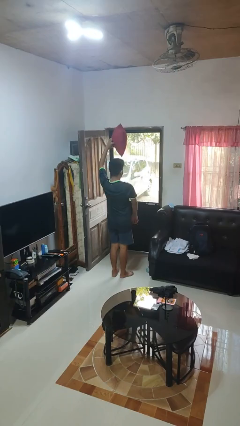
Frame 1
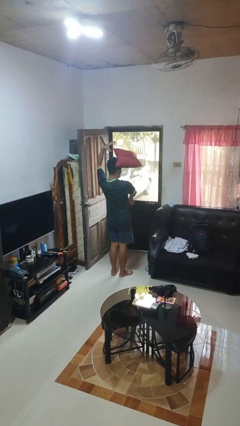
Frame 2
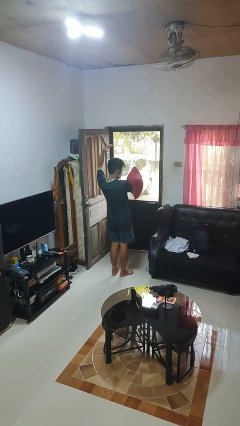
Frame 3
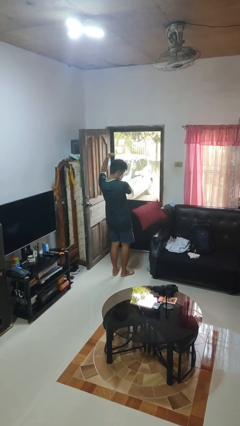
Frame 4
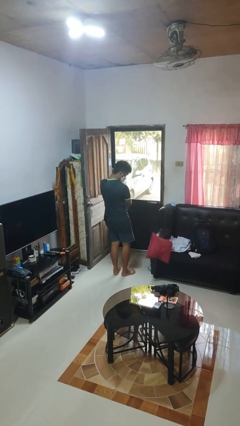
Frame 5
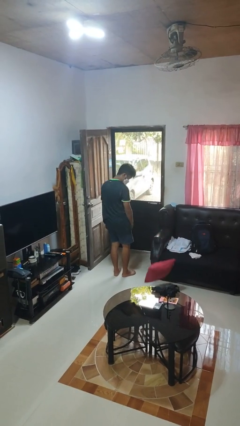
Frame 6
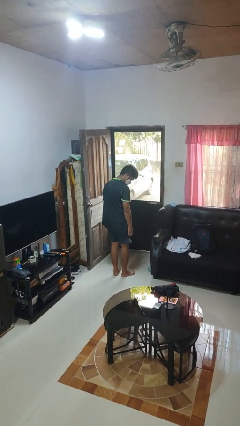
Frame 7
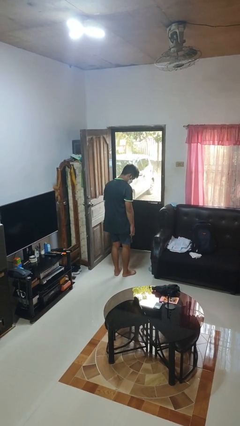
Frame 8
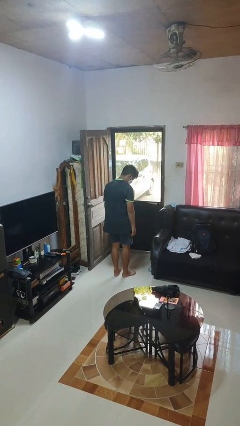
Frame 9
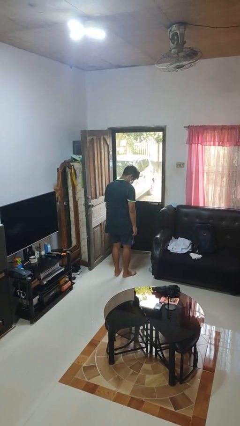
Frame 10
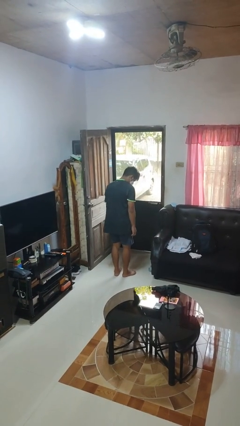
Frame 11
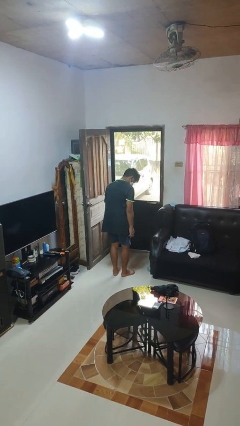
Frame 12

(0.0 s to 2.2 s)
person drops object

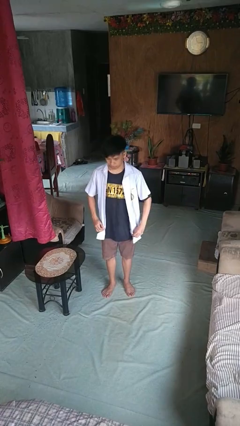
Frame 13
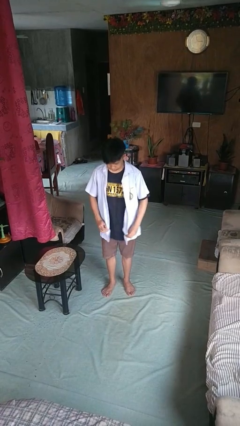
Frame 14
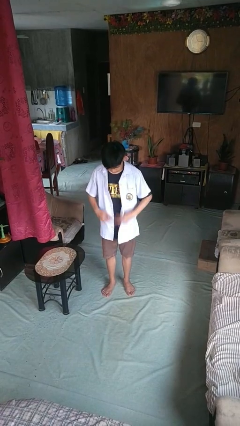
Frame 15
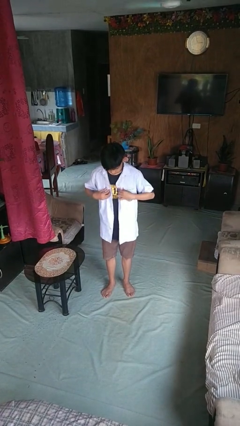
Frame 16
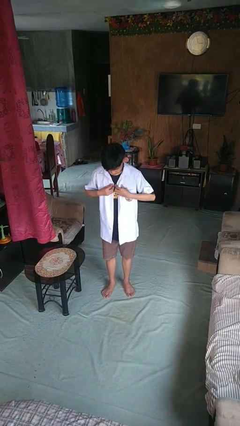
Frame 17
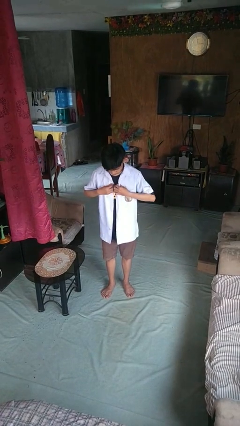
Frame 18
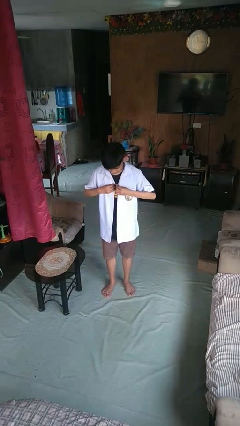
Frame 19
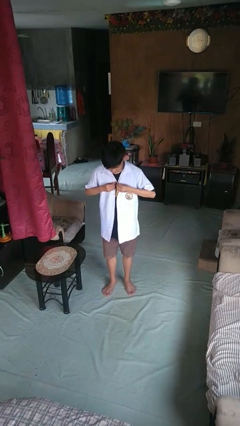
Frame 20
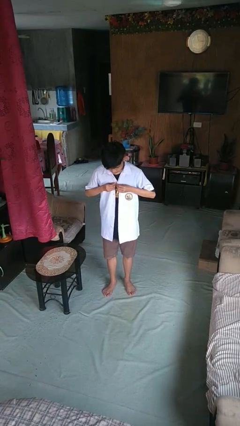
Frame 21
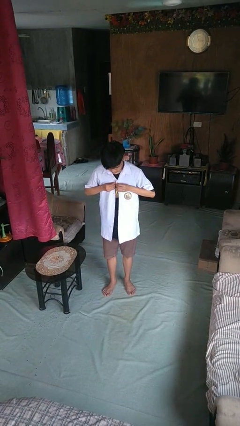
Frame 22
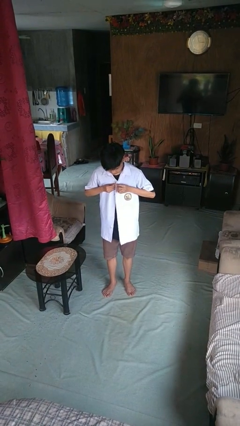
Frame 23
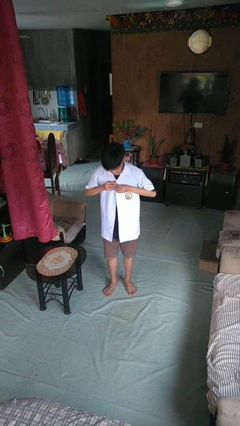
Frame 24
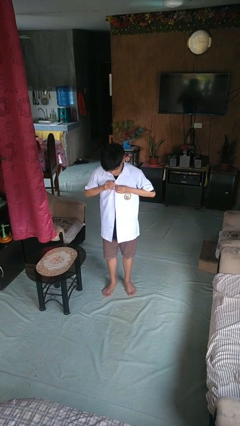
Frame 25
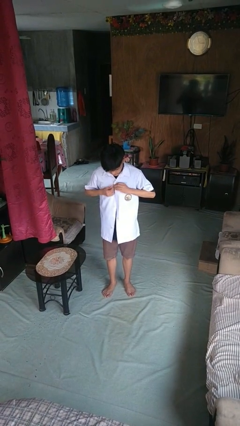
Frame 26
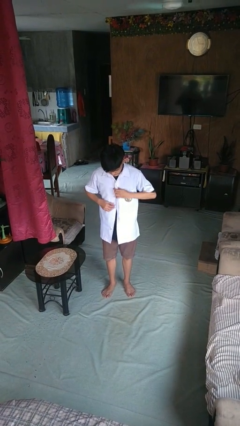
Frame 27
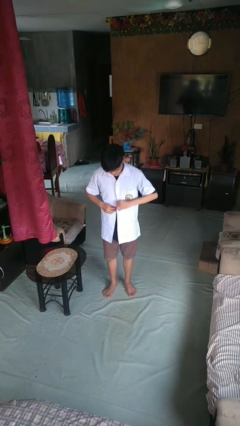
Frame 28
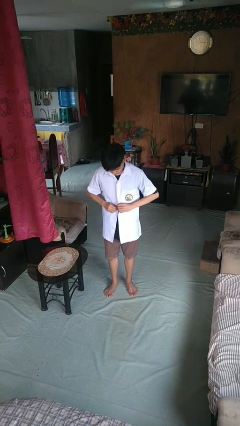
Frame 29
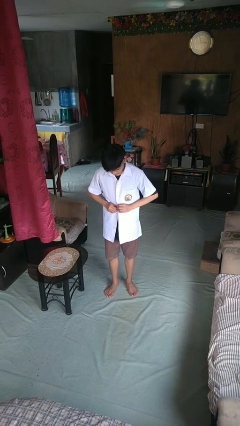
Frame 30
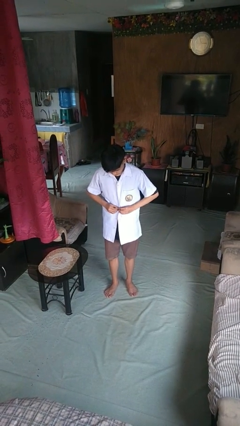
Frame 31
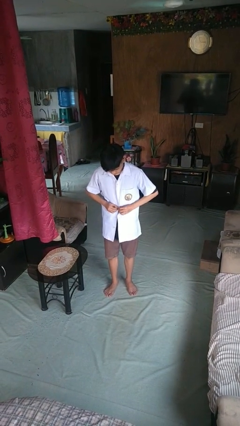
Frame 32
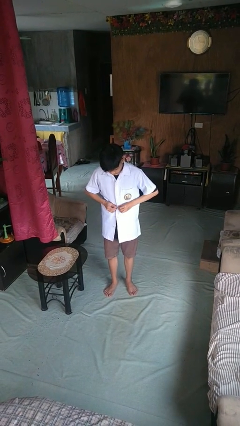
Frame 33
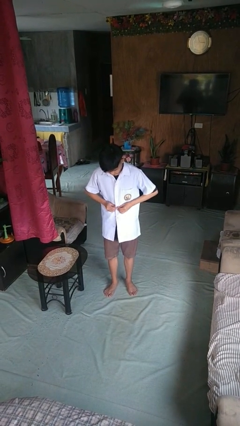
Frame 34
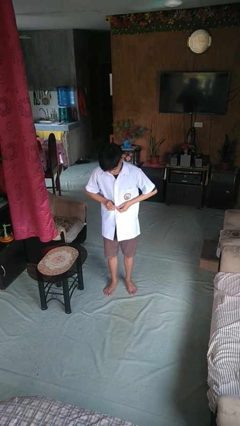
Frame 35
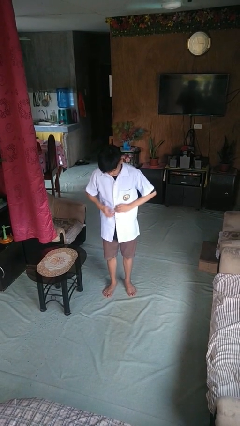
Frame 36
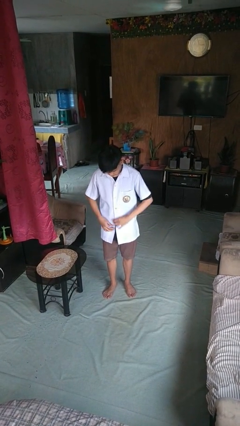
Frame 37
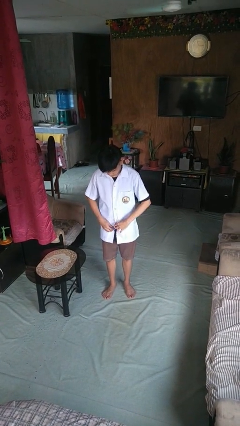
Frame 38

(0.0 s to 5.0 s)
person buttons shirt

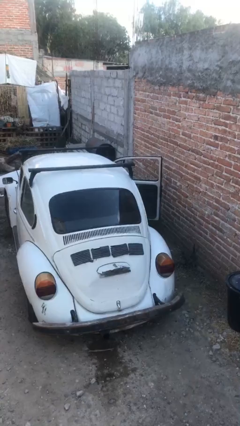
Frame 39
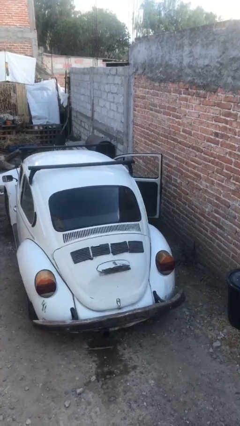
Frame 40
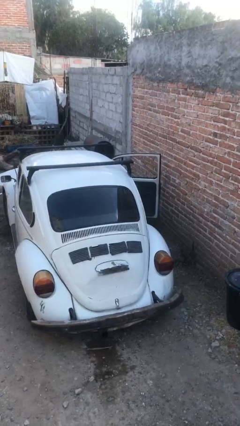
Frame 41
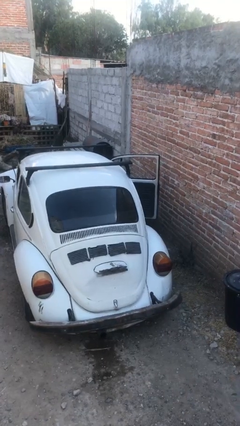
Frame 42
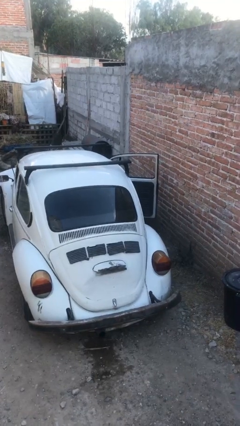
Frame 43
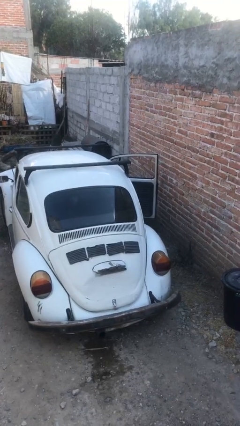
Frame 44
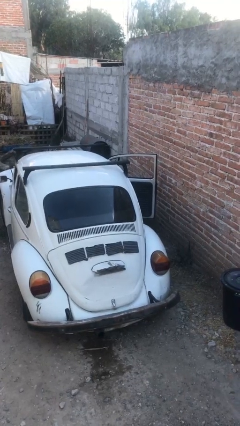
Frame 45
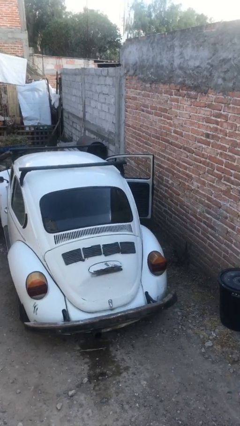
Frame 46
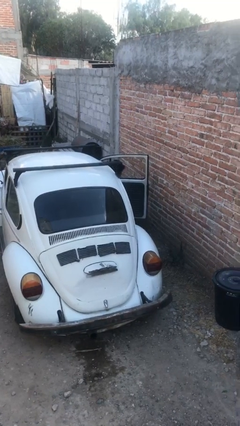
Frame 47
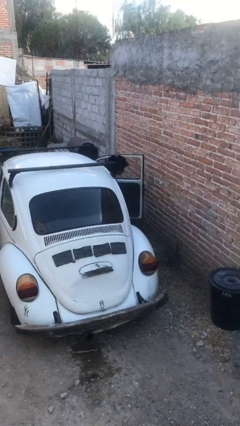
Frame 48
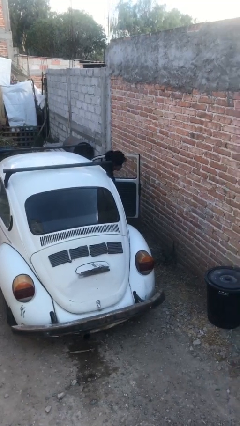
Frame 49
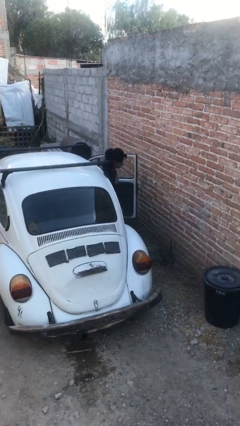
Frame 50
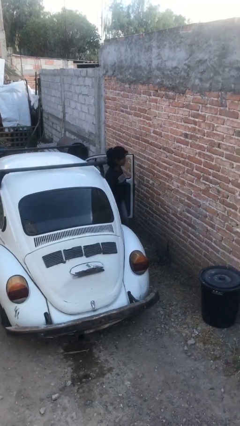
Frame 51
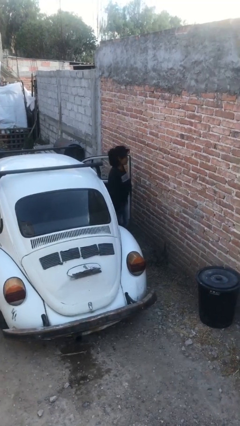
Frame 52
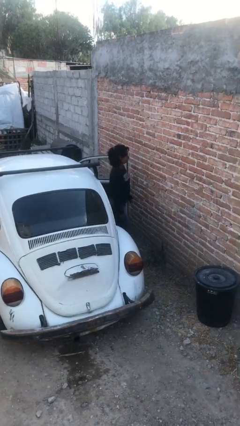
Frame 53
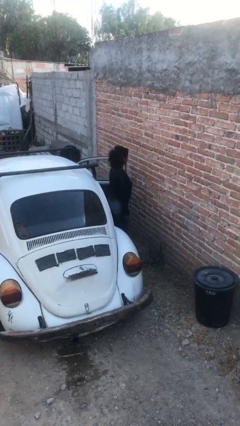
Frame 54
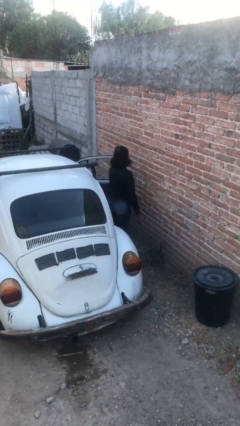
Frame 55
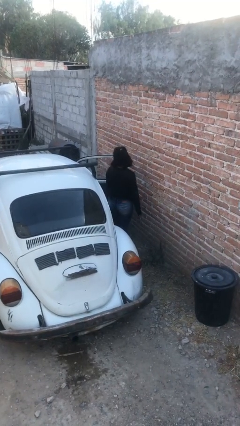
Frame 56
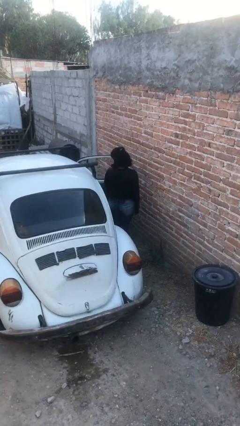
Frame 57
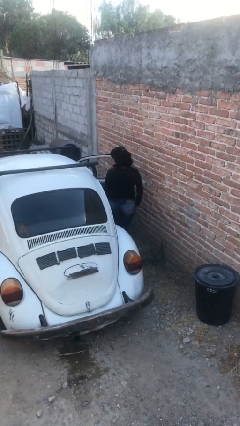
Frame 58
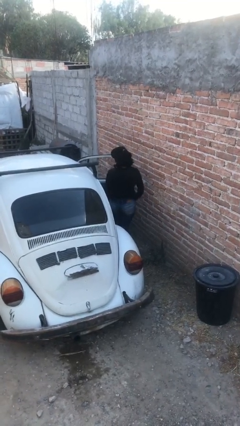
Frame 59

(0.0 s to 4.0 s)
person exits car

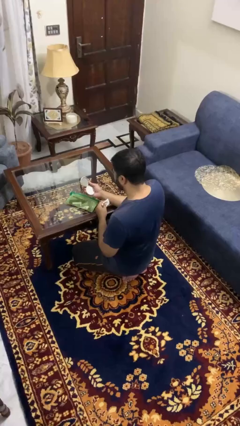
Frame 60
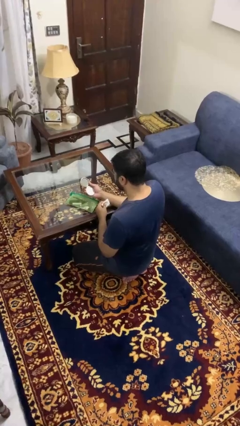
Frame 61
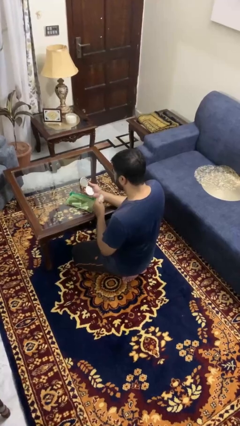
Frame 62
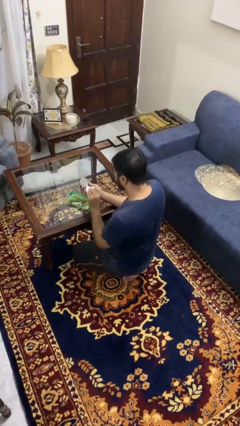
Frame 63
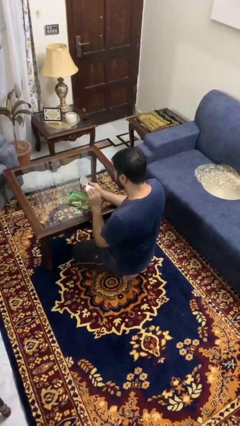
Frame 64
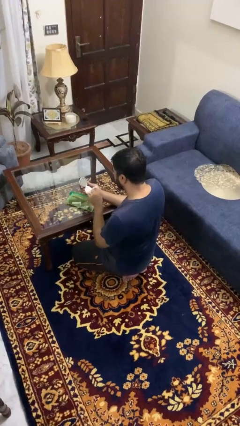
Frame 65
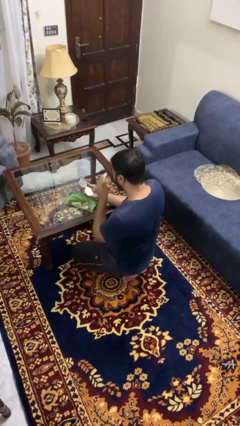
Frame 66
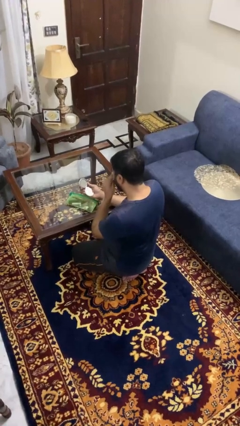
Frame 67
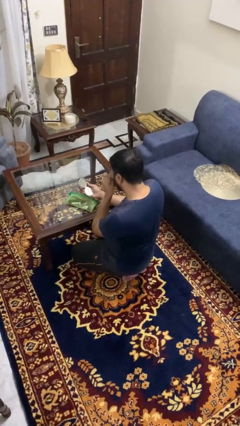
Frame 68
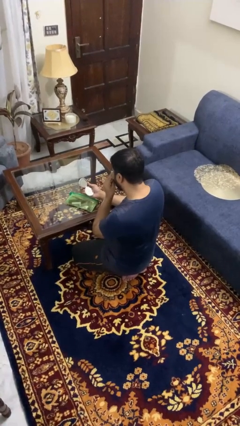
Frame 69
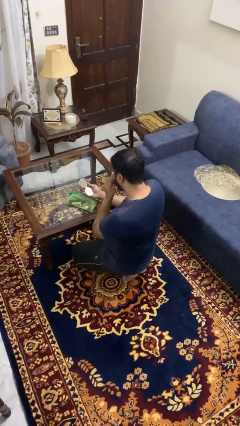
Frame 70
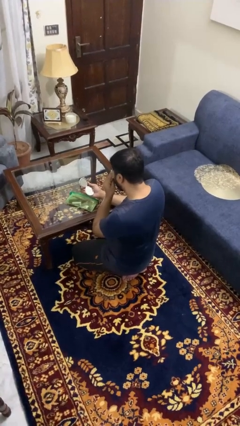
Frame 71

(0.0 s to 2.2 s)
person applies foundation makeup

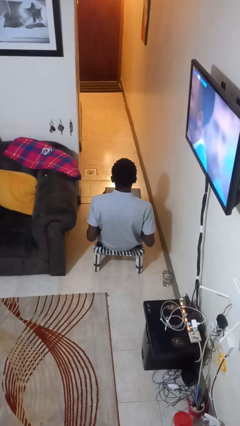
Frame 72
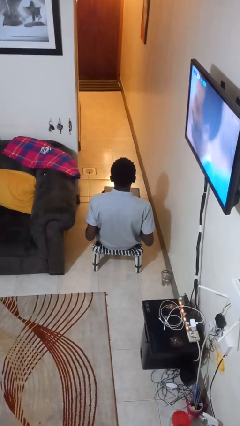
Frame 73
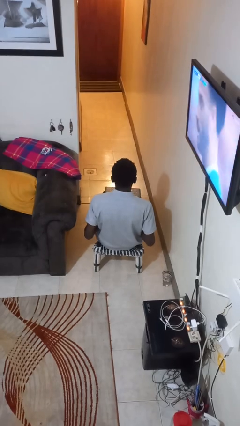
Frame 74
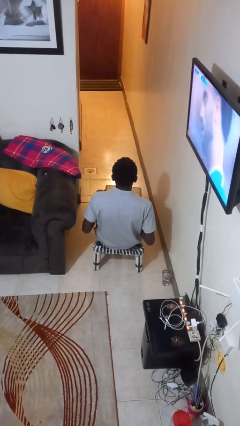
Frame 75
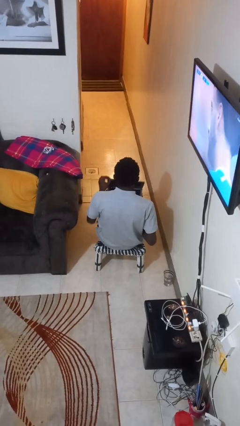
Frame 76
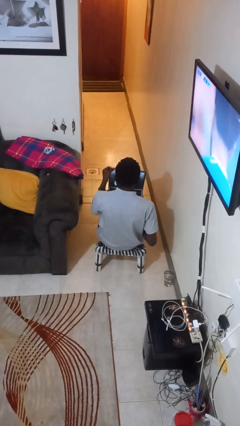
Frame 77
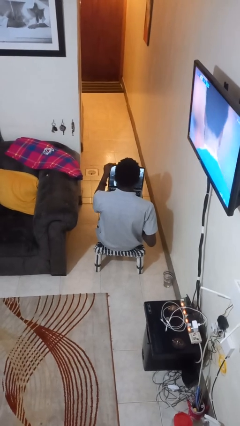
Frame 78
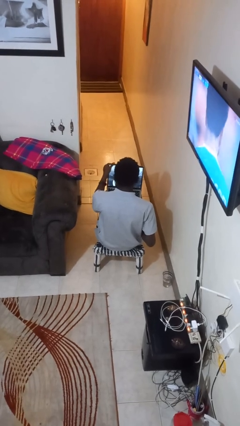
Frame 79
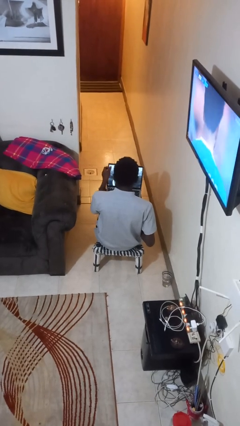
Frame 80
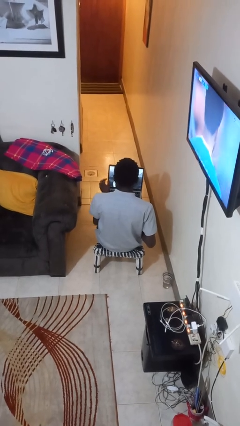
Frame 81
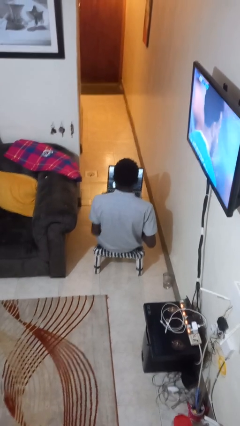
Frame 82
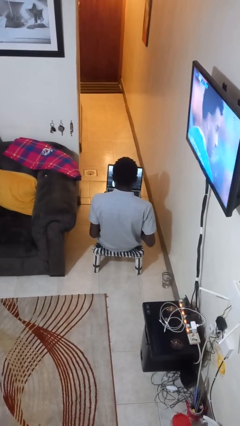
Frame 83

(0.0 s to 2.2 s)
person opens laptop

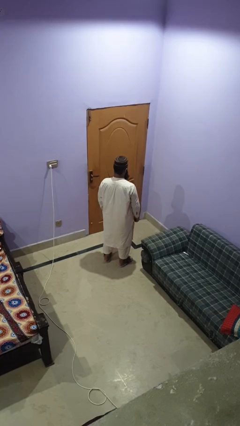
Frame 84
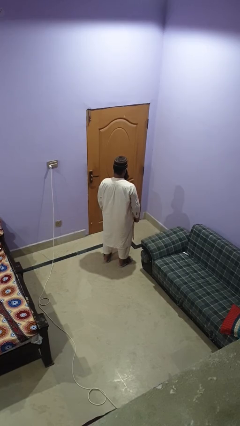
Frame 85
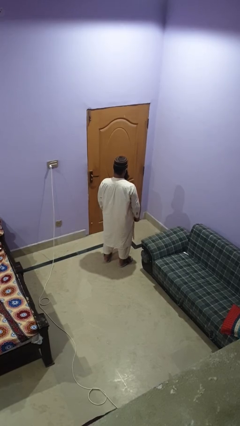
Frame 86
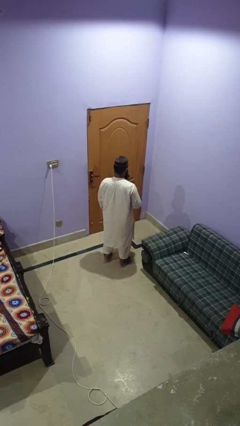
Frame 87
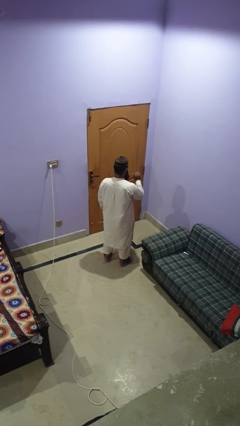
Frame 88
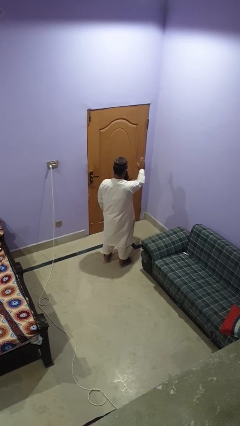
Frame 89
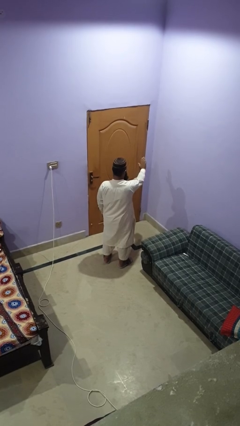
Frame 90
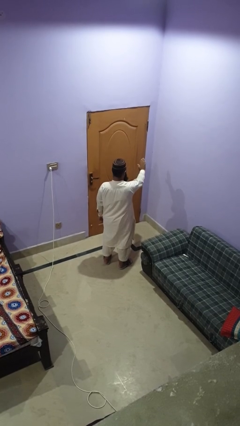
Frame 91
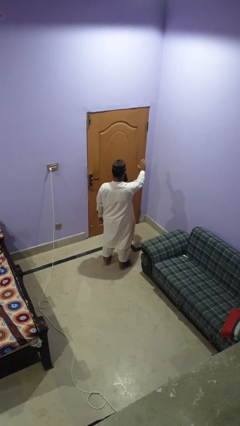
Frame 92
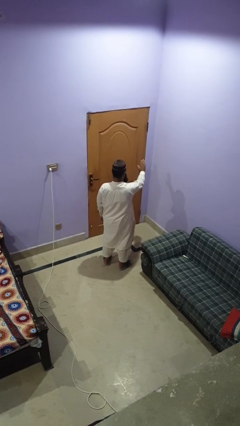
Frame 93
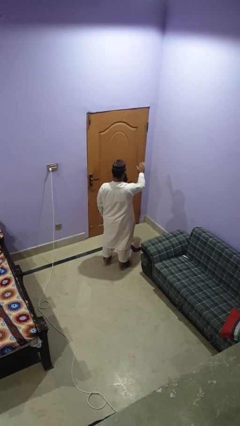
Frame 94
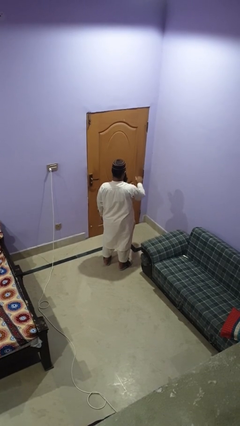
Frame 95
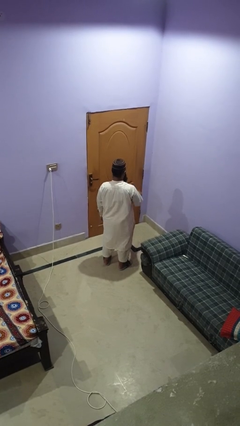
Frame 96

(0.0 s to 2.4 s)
person gestures stop
